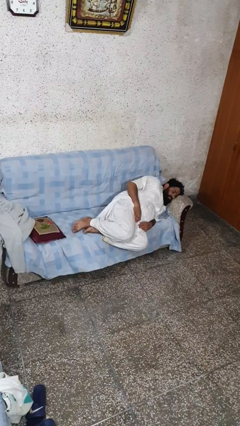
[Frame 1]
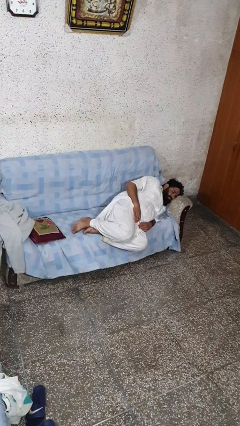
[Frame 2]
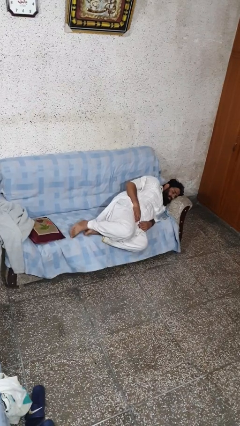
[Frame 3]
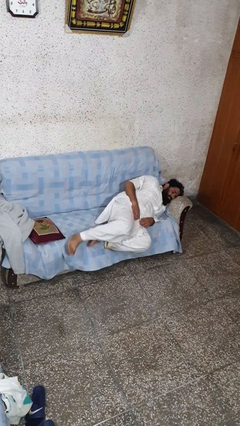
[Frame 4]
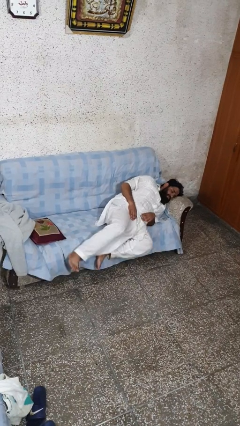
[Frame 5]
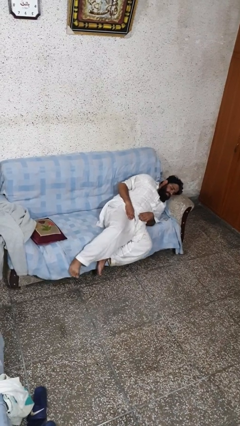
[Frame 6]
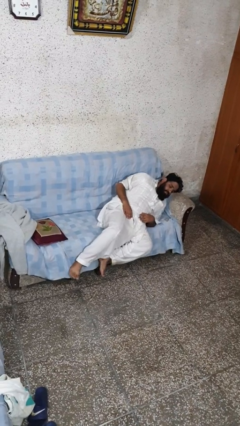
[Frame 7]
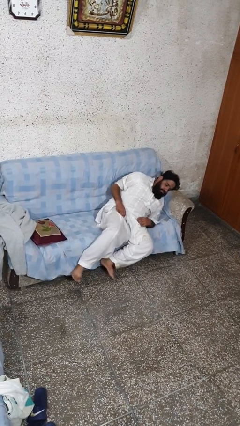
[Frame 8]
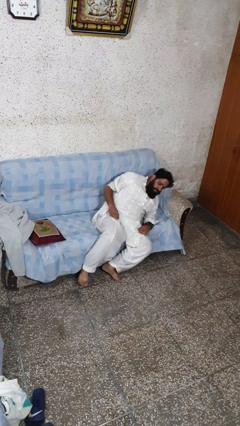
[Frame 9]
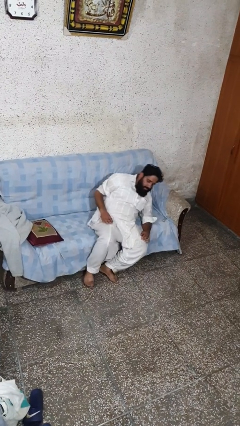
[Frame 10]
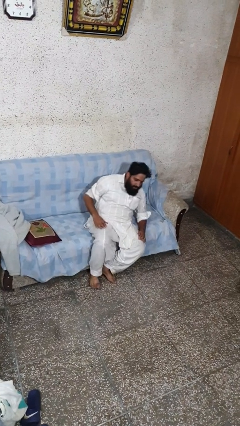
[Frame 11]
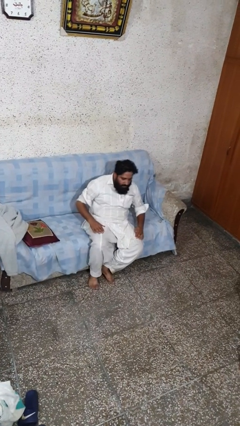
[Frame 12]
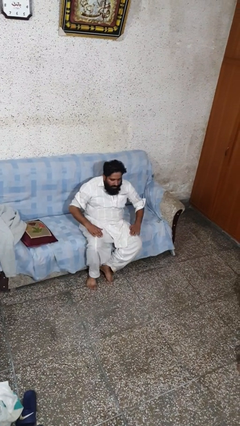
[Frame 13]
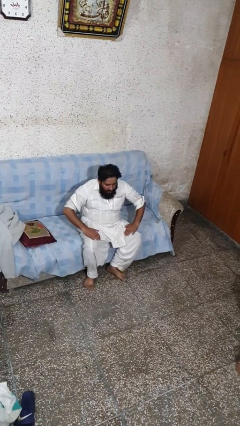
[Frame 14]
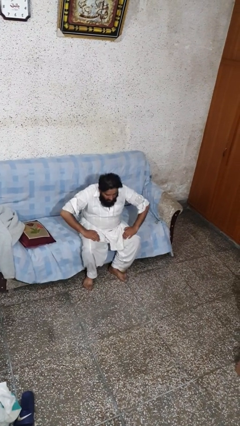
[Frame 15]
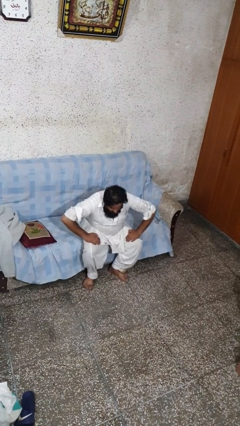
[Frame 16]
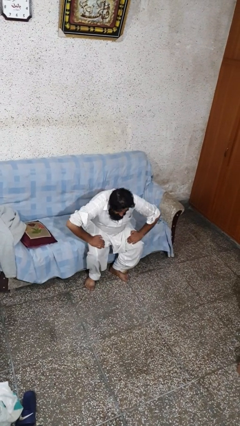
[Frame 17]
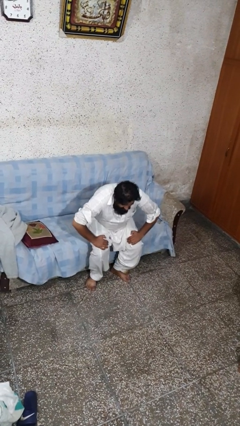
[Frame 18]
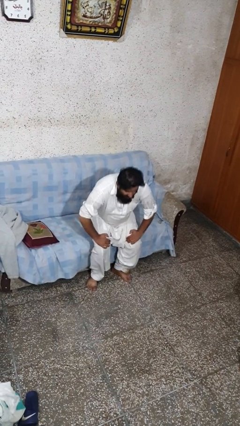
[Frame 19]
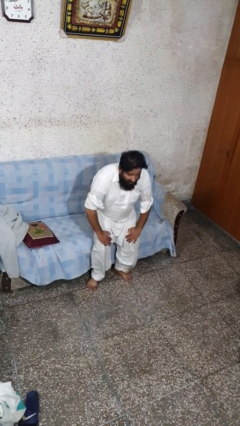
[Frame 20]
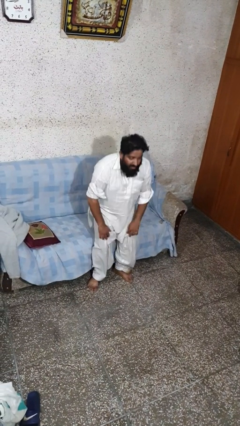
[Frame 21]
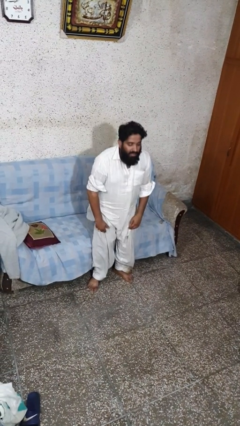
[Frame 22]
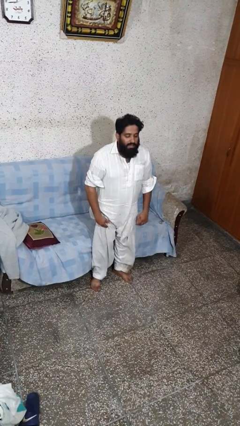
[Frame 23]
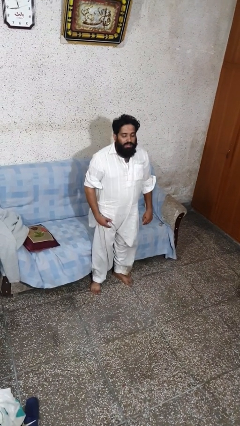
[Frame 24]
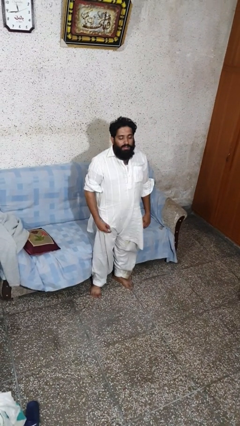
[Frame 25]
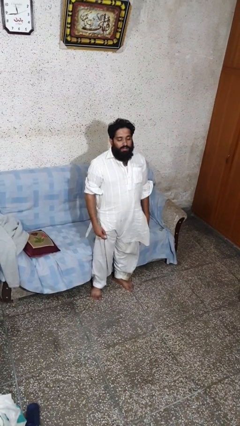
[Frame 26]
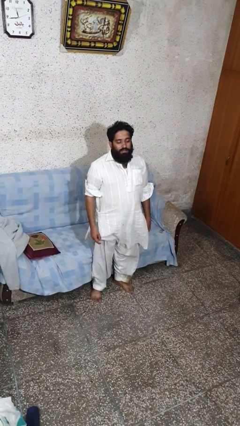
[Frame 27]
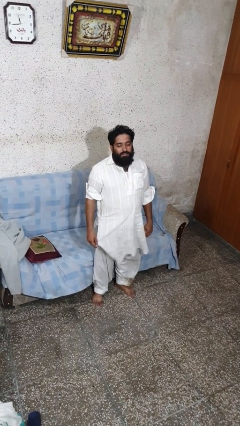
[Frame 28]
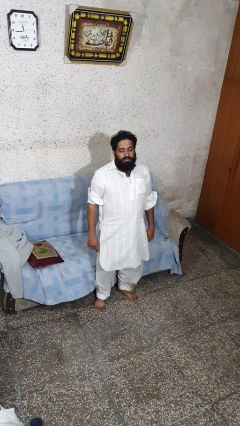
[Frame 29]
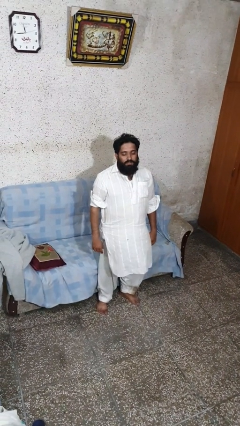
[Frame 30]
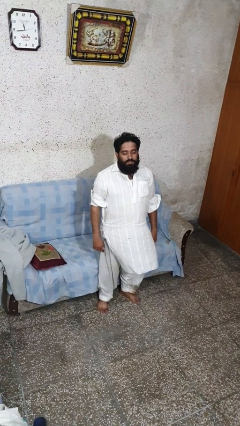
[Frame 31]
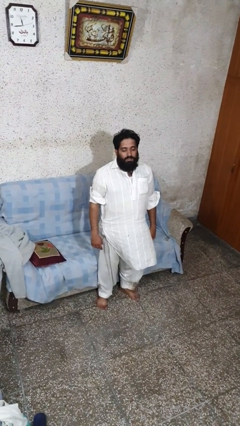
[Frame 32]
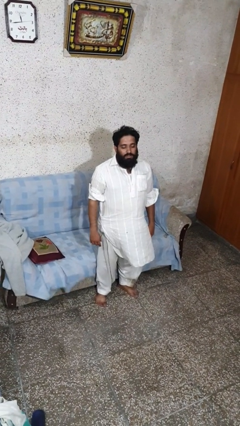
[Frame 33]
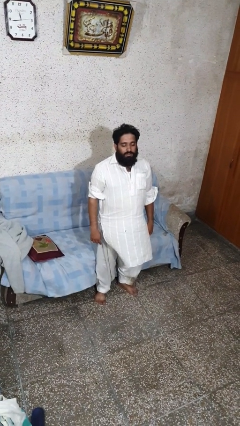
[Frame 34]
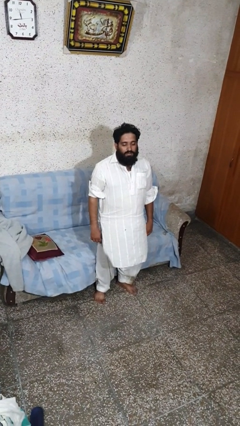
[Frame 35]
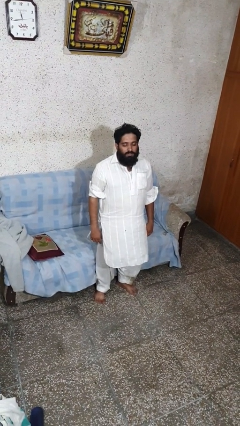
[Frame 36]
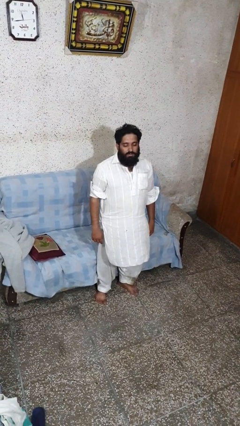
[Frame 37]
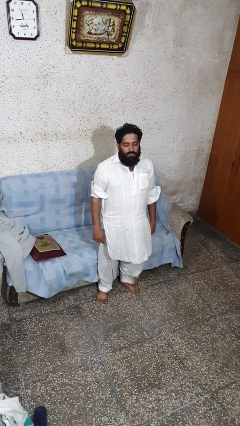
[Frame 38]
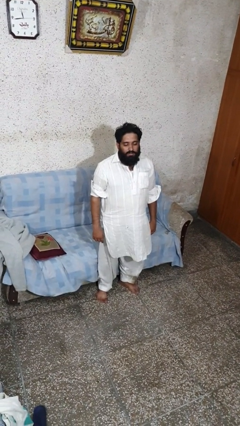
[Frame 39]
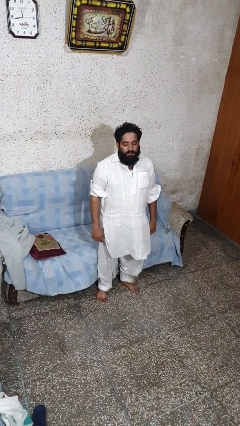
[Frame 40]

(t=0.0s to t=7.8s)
person stands up

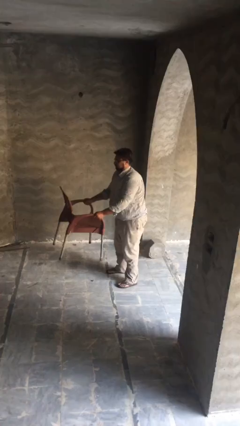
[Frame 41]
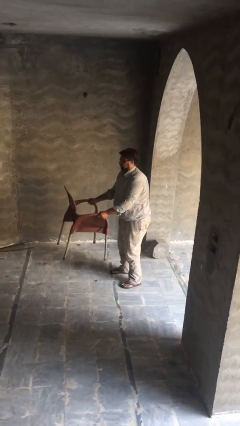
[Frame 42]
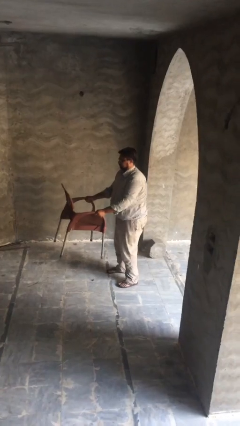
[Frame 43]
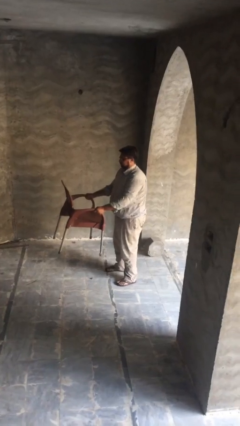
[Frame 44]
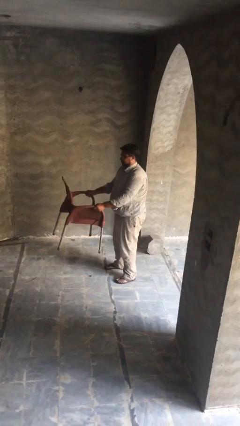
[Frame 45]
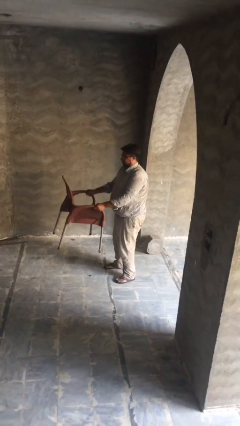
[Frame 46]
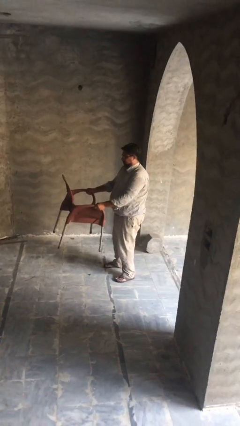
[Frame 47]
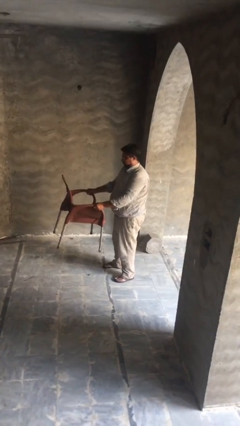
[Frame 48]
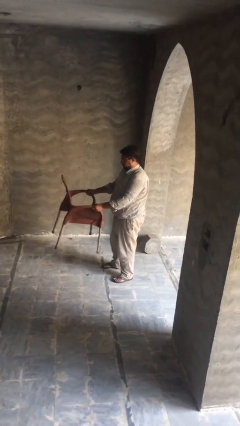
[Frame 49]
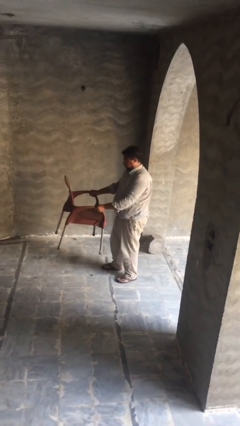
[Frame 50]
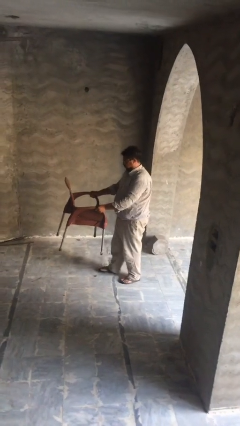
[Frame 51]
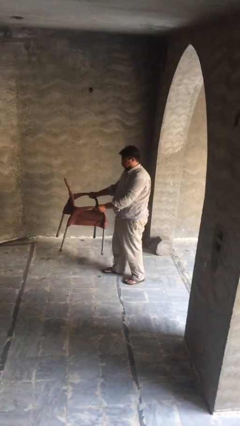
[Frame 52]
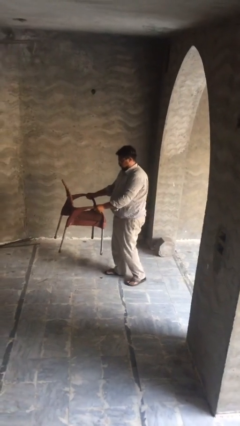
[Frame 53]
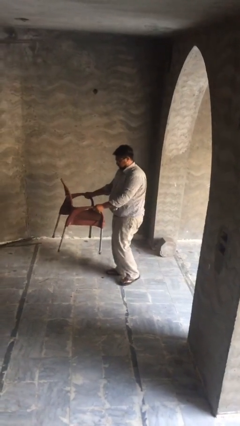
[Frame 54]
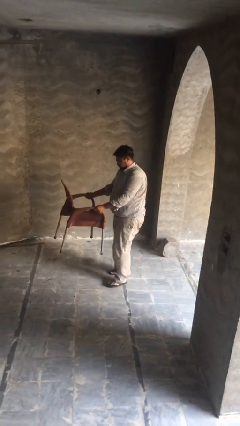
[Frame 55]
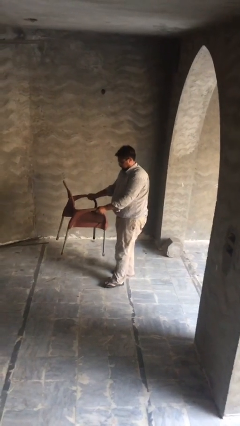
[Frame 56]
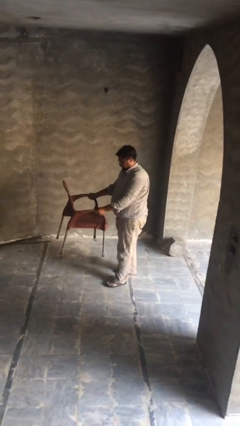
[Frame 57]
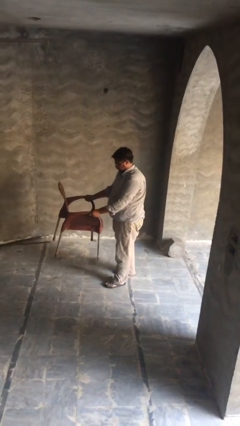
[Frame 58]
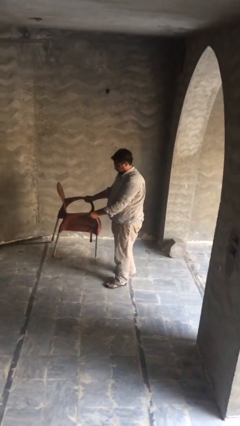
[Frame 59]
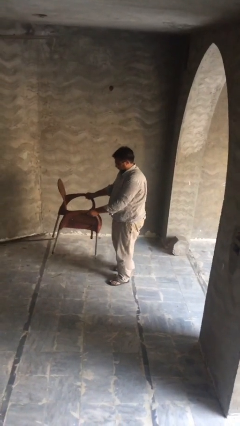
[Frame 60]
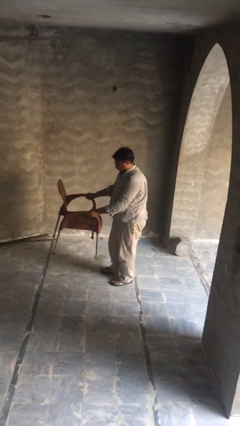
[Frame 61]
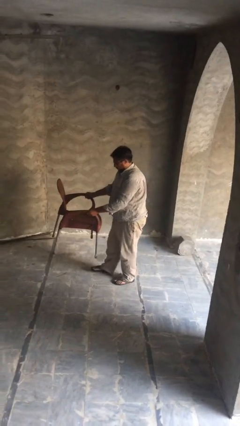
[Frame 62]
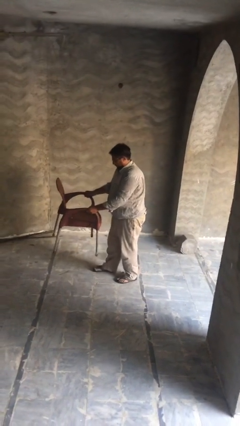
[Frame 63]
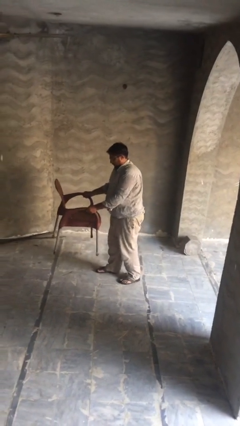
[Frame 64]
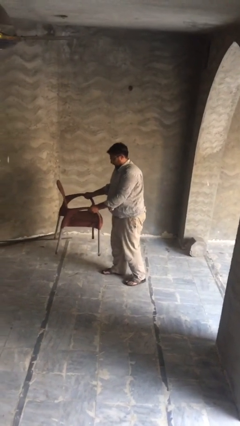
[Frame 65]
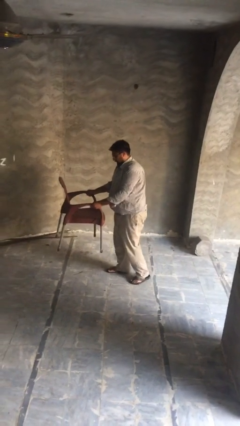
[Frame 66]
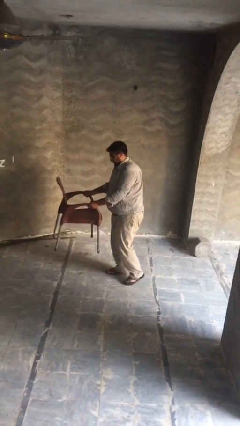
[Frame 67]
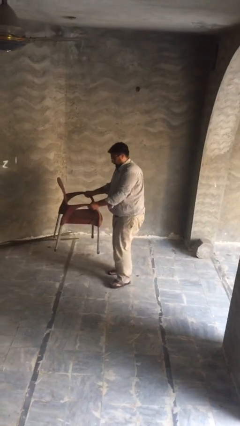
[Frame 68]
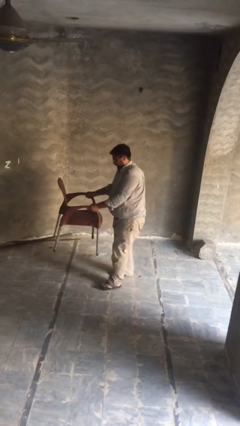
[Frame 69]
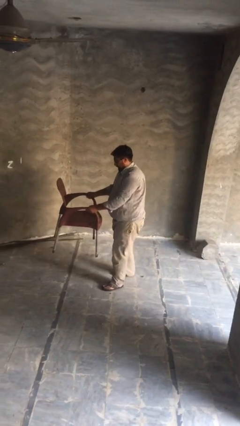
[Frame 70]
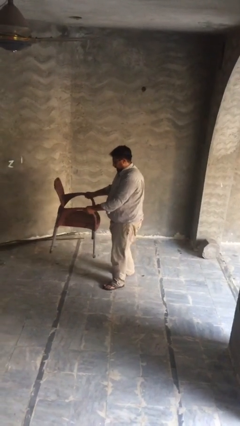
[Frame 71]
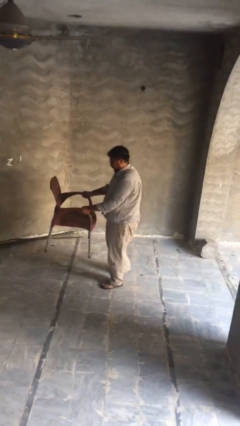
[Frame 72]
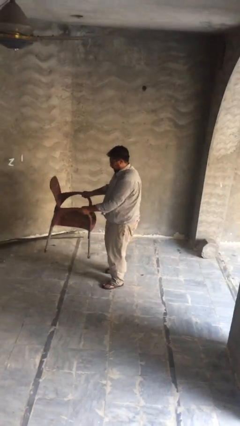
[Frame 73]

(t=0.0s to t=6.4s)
person carries heavy object

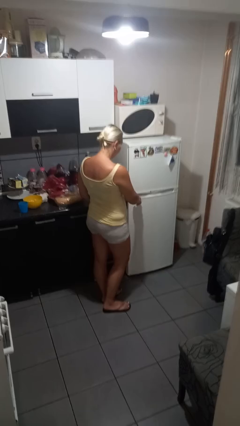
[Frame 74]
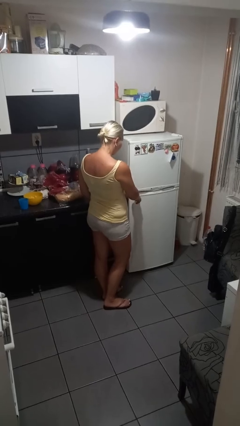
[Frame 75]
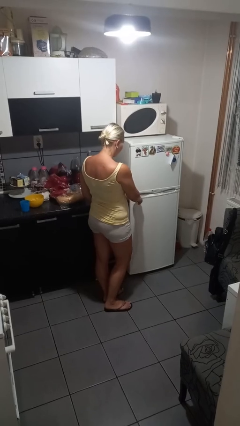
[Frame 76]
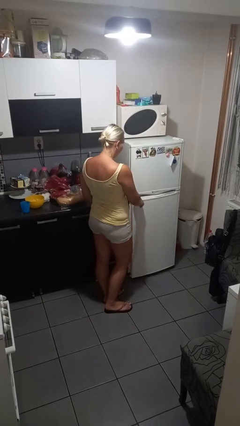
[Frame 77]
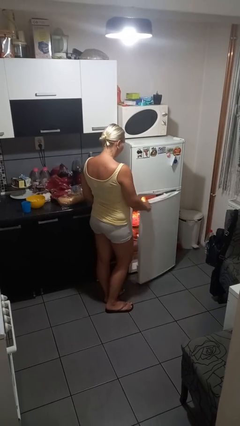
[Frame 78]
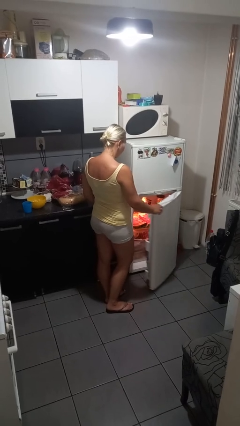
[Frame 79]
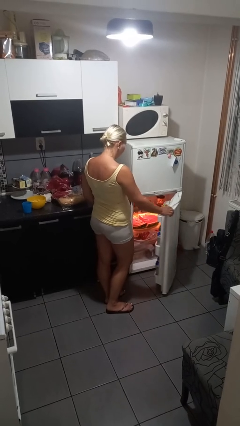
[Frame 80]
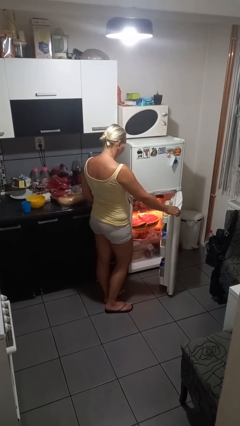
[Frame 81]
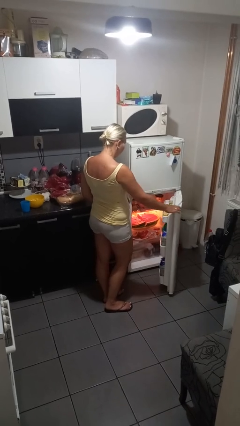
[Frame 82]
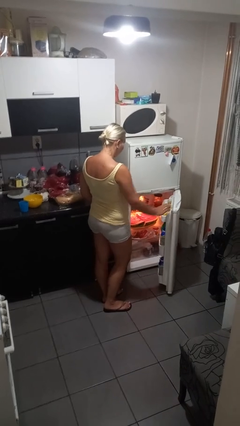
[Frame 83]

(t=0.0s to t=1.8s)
person opens refrigerator

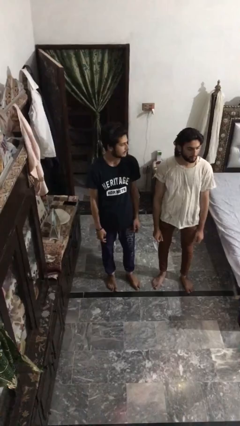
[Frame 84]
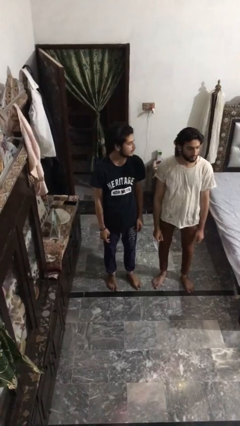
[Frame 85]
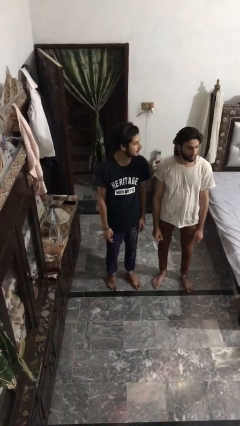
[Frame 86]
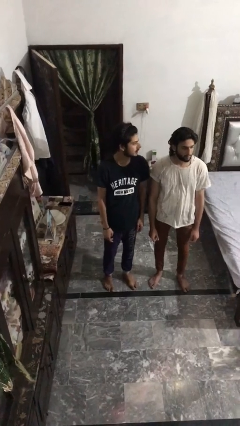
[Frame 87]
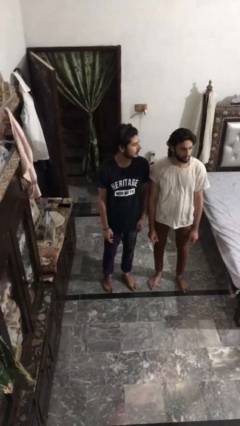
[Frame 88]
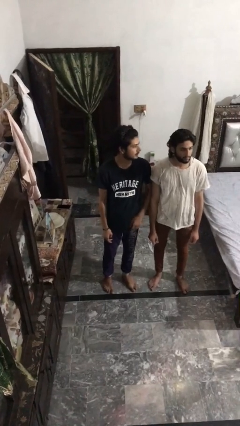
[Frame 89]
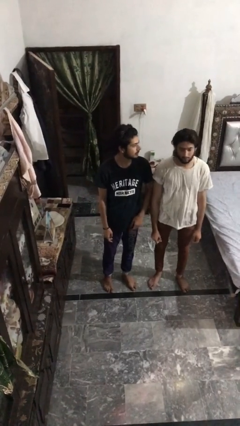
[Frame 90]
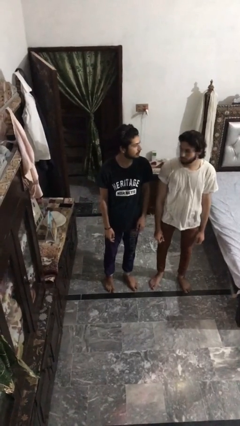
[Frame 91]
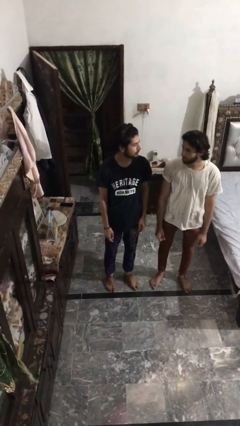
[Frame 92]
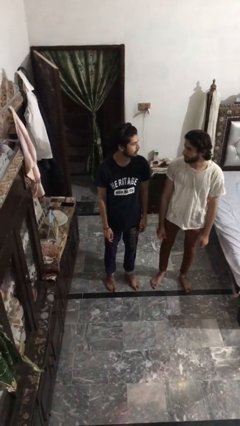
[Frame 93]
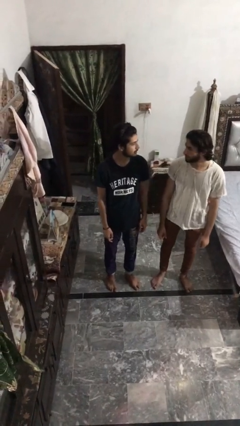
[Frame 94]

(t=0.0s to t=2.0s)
person nudges person with elbow
